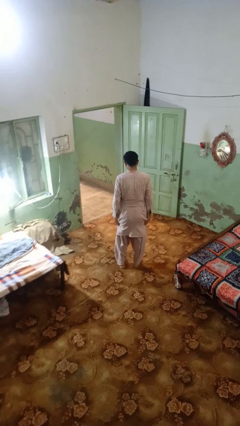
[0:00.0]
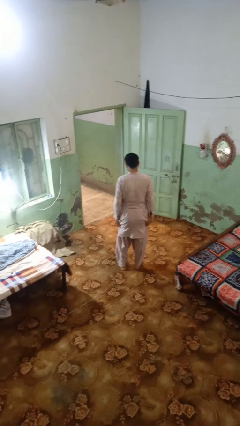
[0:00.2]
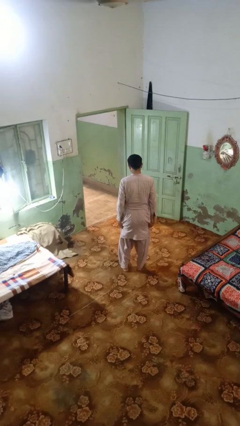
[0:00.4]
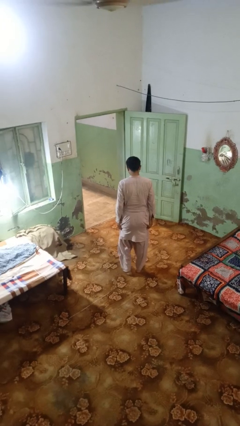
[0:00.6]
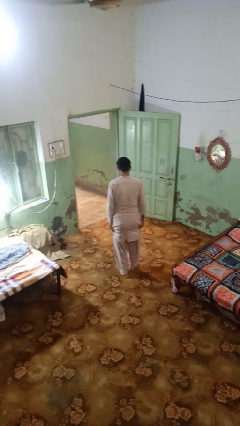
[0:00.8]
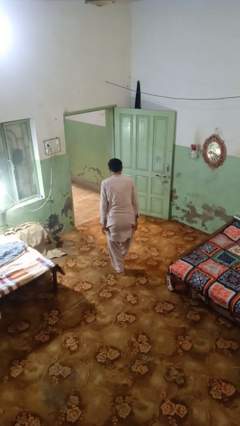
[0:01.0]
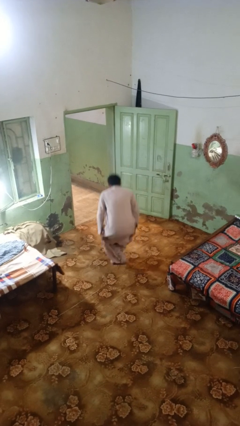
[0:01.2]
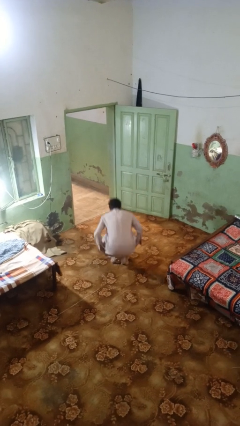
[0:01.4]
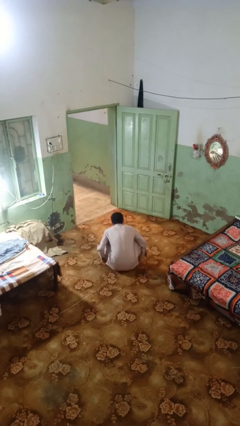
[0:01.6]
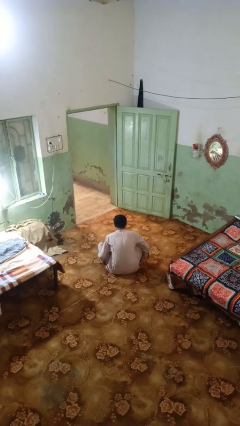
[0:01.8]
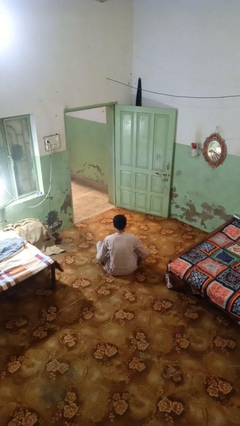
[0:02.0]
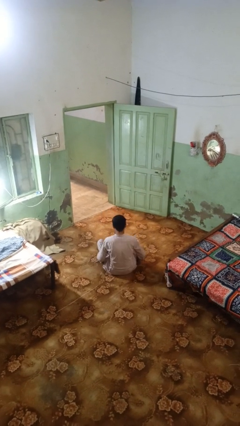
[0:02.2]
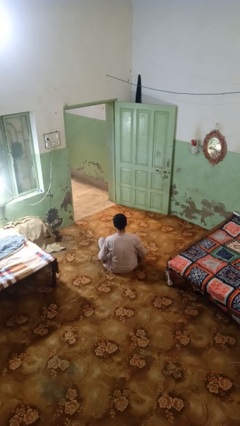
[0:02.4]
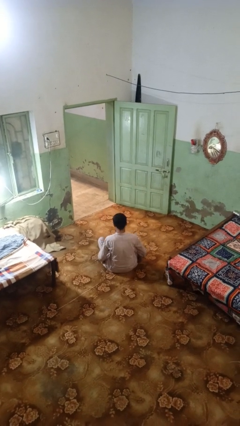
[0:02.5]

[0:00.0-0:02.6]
person sits crisscross

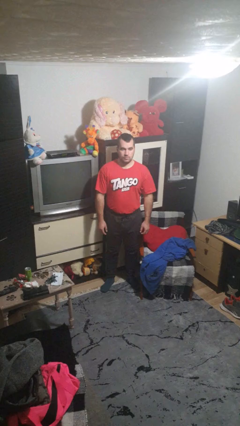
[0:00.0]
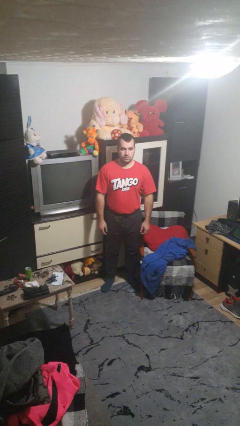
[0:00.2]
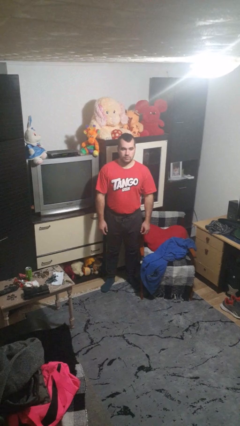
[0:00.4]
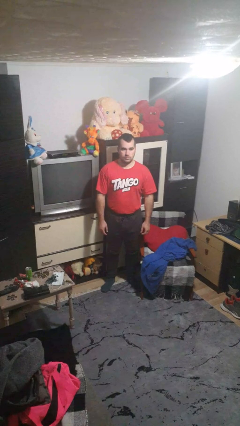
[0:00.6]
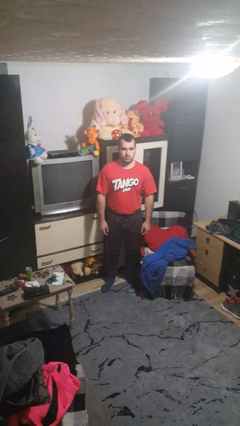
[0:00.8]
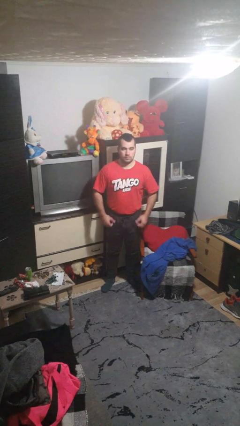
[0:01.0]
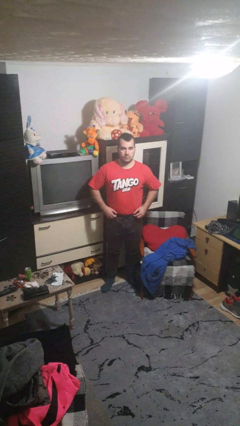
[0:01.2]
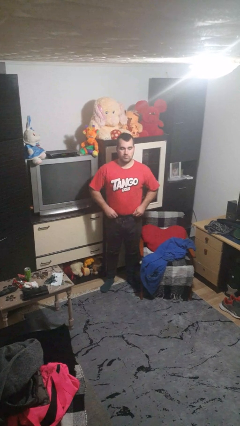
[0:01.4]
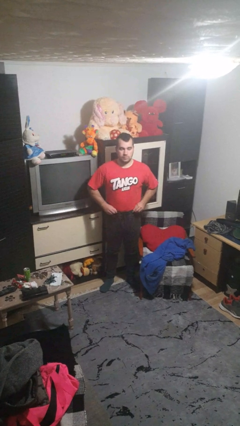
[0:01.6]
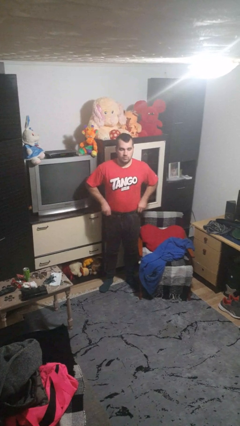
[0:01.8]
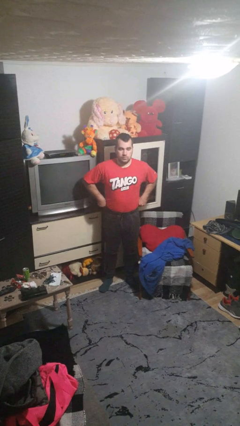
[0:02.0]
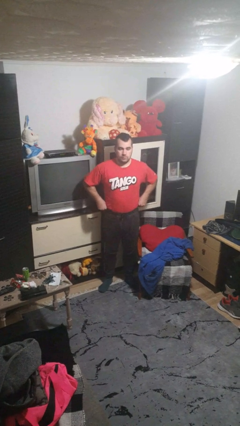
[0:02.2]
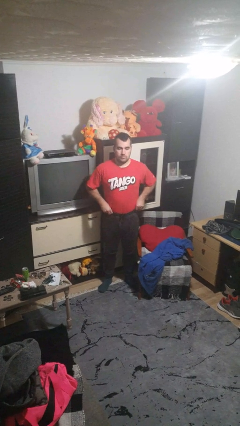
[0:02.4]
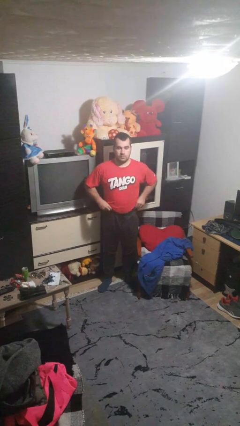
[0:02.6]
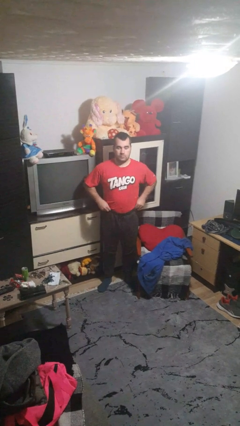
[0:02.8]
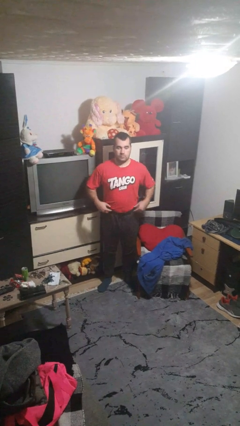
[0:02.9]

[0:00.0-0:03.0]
person hikes up pants

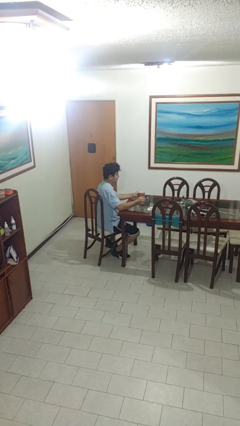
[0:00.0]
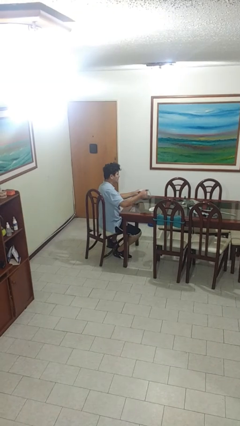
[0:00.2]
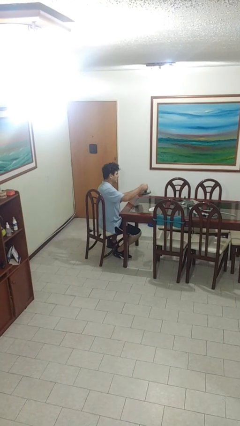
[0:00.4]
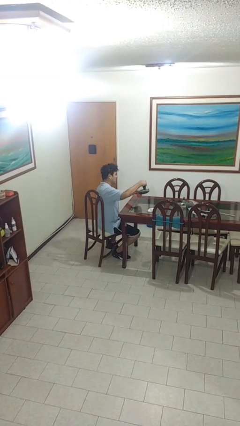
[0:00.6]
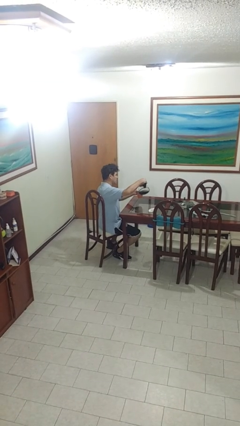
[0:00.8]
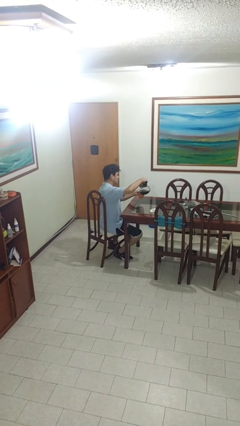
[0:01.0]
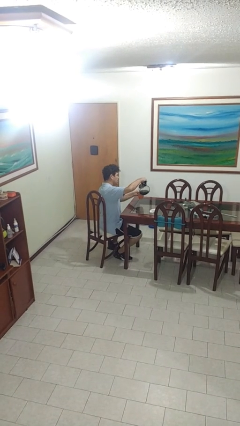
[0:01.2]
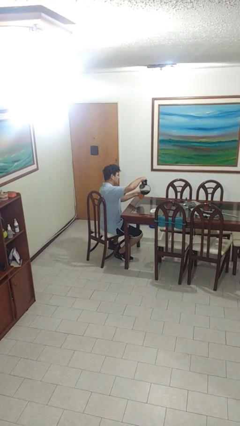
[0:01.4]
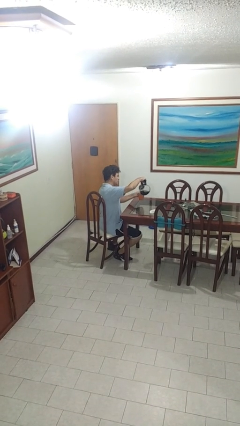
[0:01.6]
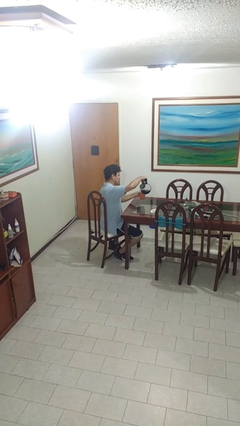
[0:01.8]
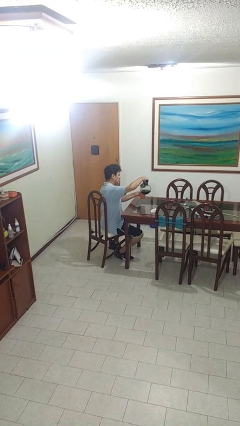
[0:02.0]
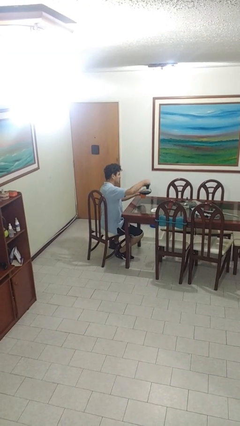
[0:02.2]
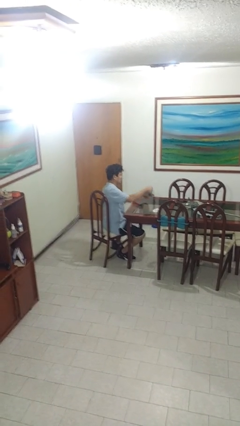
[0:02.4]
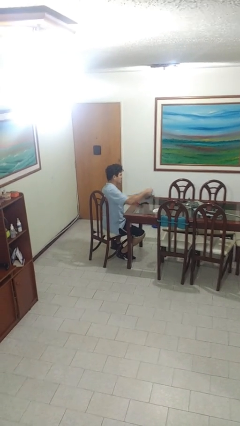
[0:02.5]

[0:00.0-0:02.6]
person pours coffee into mug

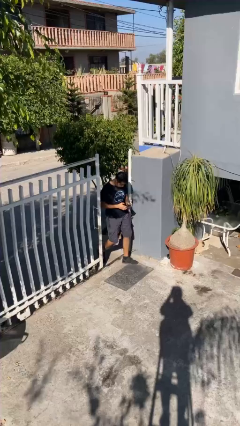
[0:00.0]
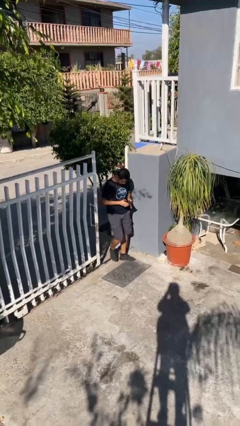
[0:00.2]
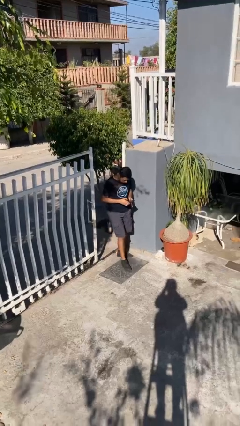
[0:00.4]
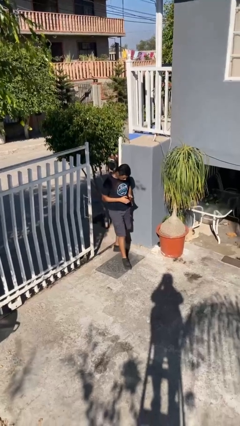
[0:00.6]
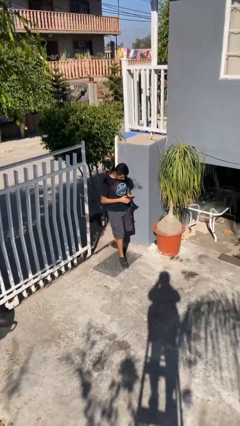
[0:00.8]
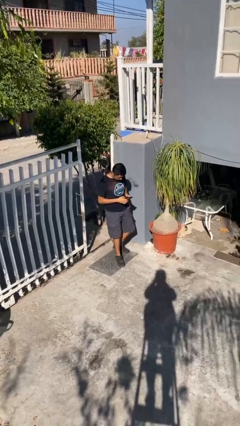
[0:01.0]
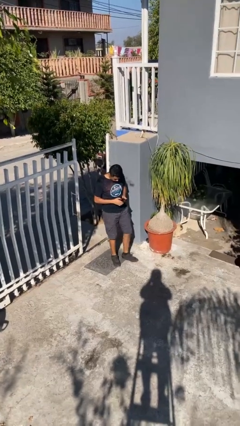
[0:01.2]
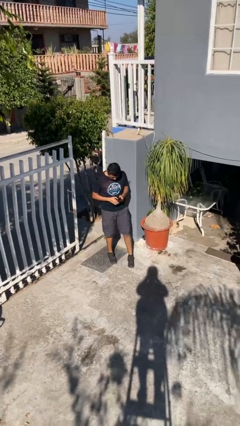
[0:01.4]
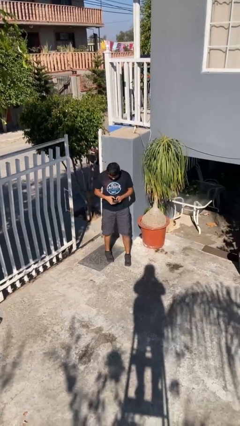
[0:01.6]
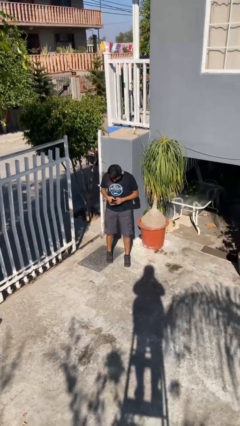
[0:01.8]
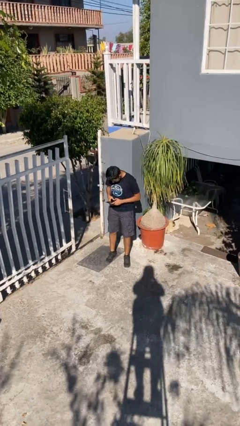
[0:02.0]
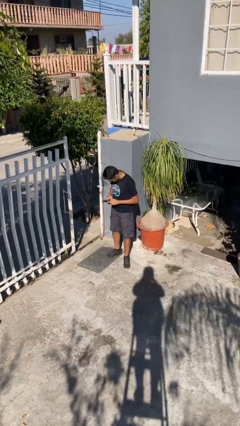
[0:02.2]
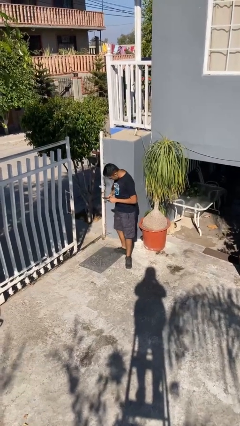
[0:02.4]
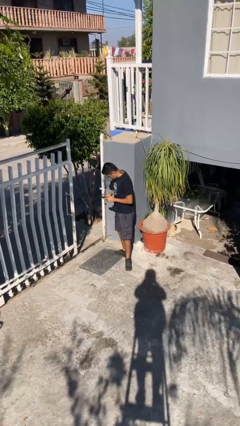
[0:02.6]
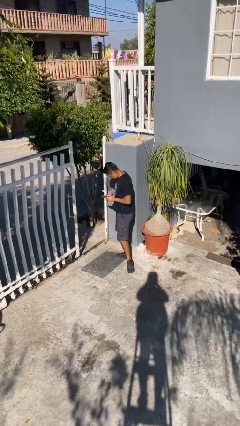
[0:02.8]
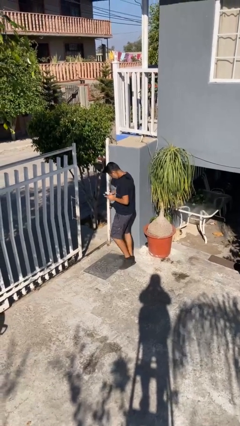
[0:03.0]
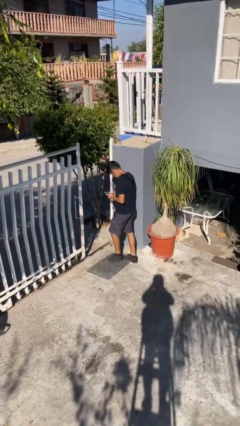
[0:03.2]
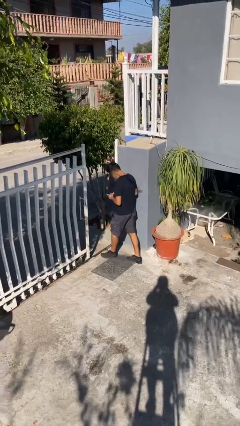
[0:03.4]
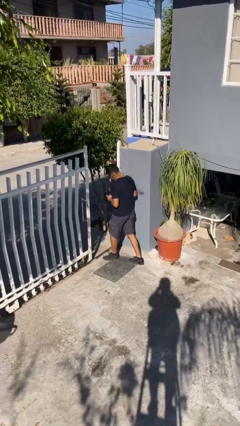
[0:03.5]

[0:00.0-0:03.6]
person enters scene through structure

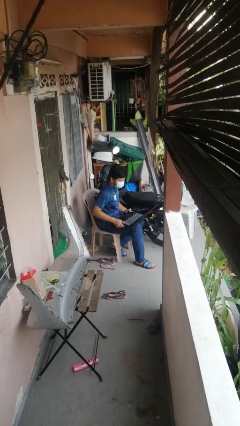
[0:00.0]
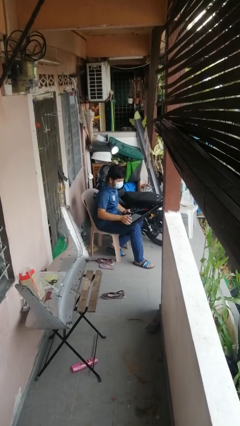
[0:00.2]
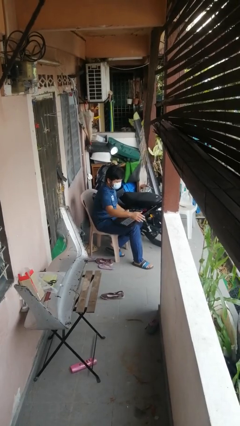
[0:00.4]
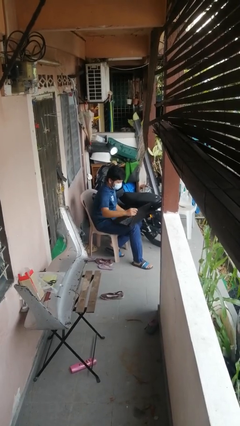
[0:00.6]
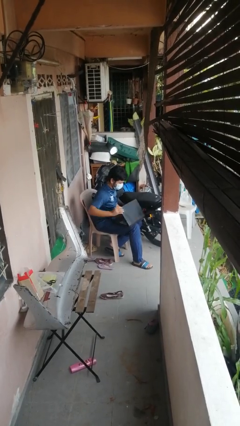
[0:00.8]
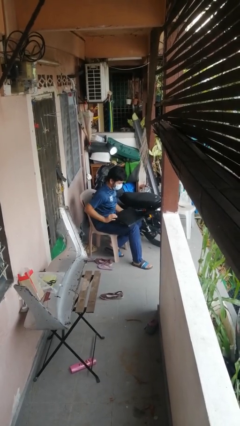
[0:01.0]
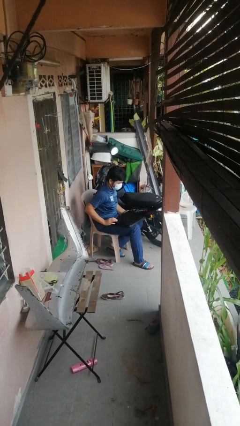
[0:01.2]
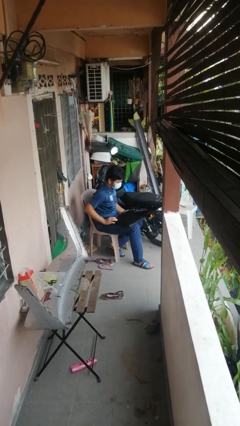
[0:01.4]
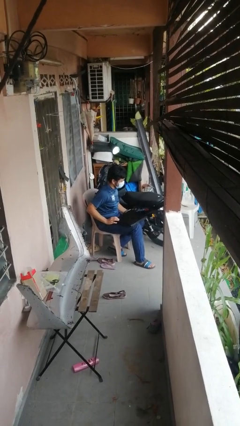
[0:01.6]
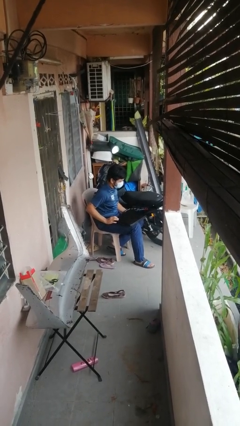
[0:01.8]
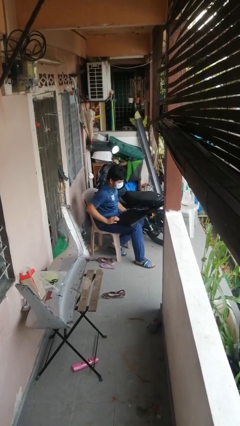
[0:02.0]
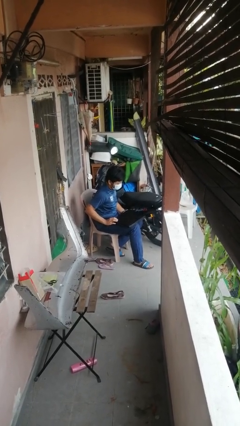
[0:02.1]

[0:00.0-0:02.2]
person closes laptop

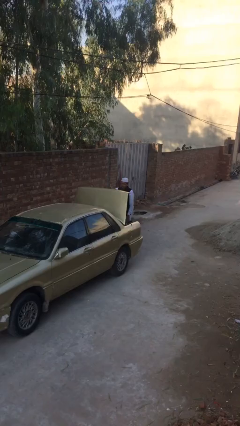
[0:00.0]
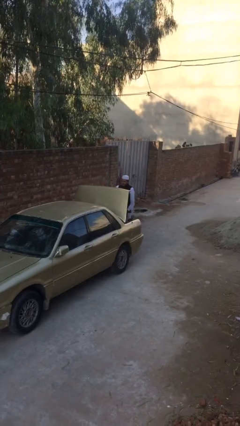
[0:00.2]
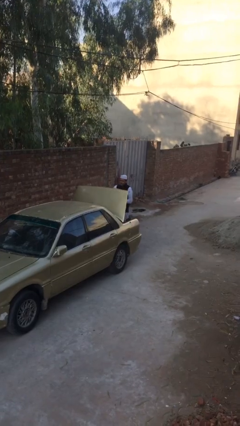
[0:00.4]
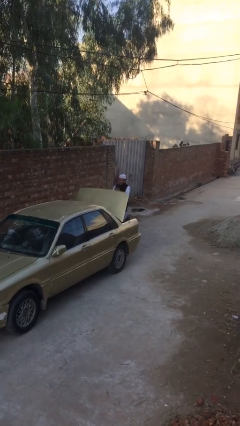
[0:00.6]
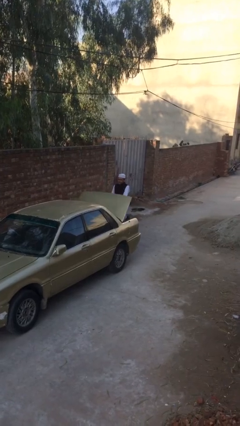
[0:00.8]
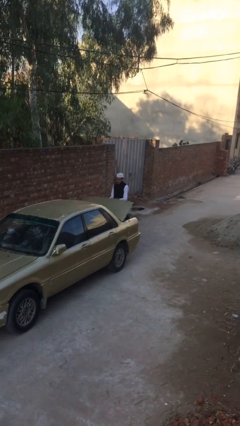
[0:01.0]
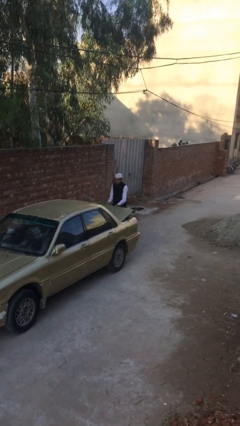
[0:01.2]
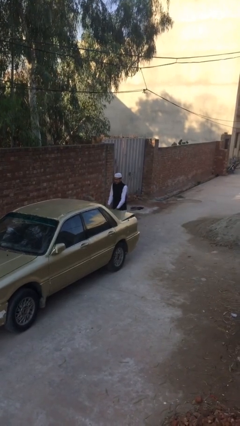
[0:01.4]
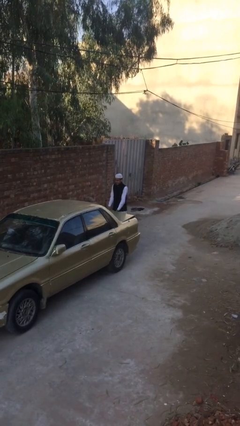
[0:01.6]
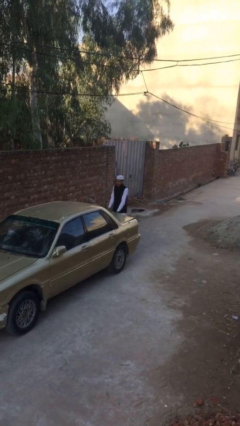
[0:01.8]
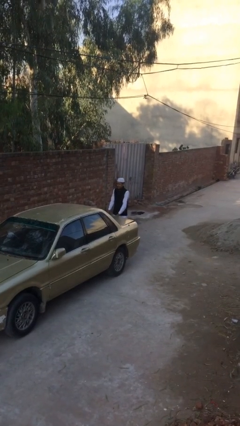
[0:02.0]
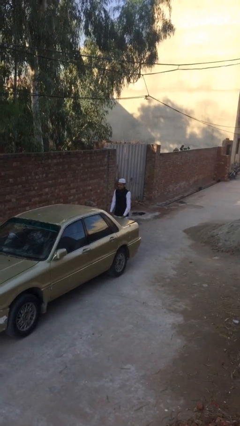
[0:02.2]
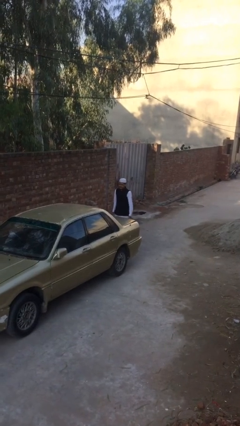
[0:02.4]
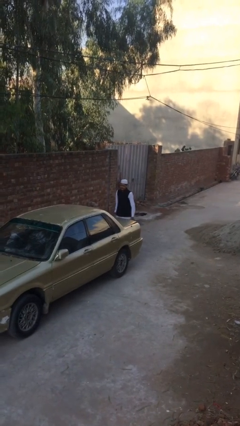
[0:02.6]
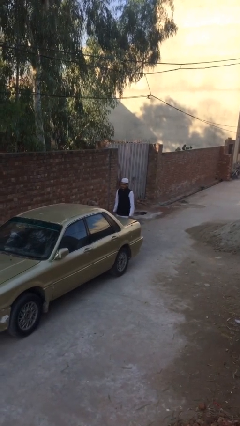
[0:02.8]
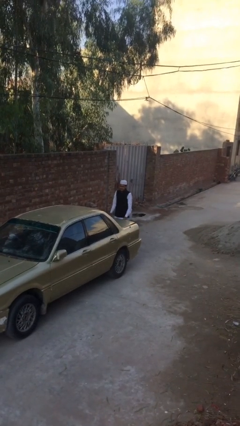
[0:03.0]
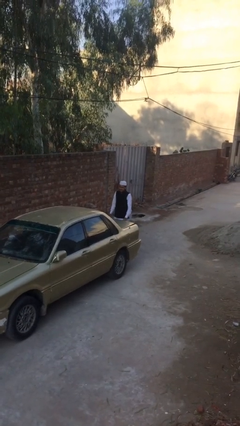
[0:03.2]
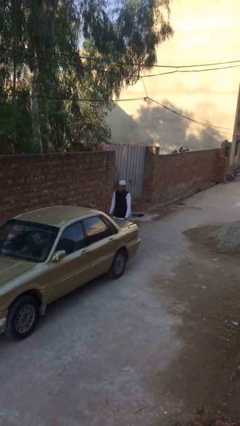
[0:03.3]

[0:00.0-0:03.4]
person closes car trunk

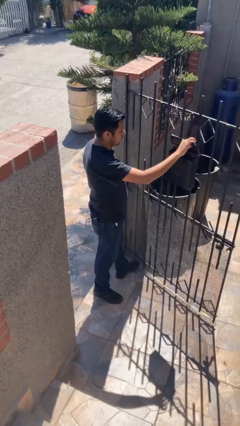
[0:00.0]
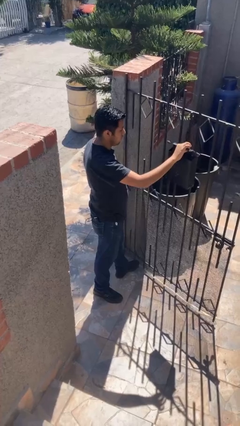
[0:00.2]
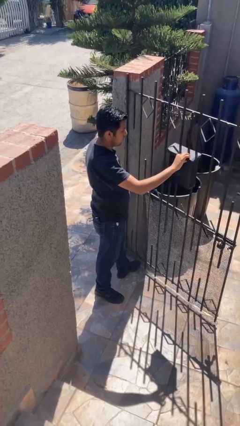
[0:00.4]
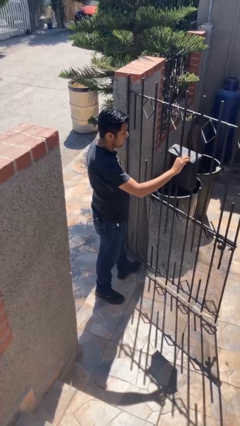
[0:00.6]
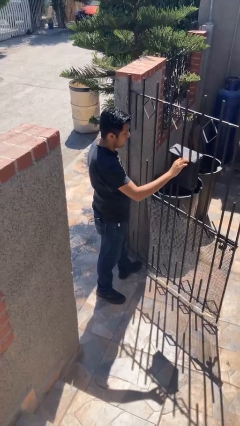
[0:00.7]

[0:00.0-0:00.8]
person closes mailbox
